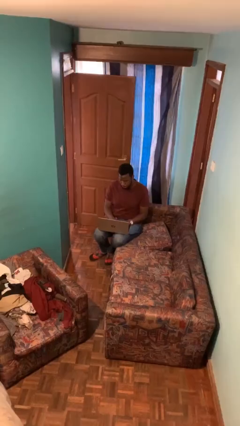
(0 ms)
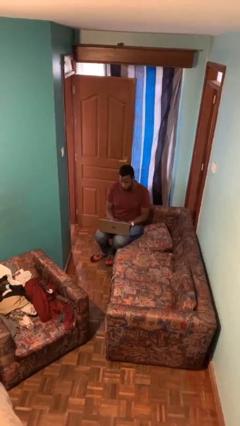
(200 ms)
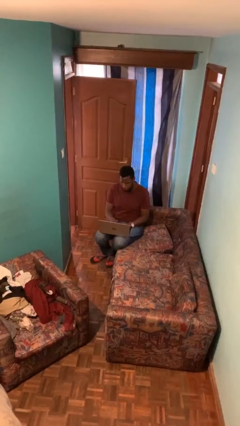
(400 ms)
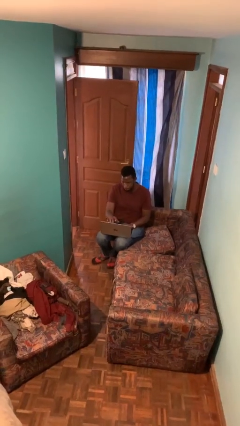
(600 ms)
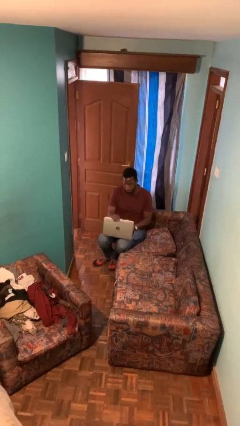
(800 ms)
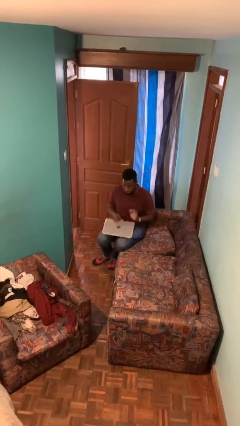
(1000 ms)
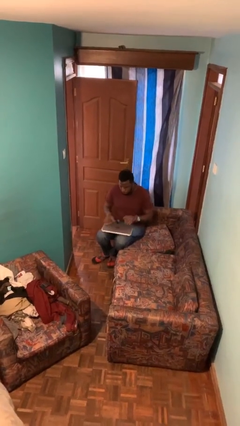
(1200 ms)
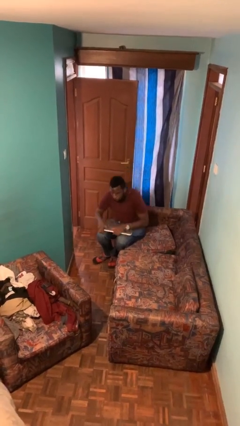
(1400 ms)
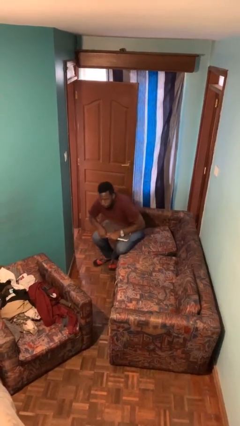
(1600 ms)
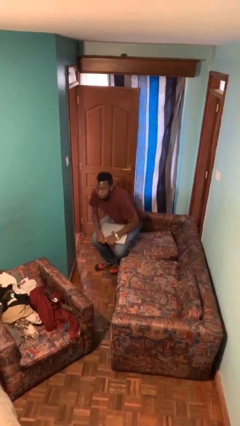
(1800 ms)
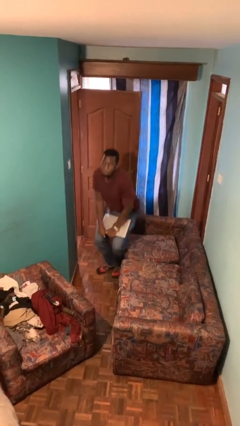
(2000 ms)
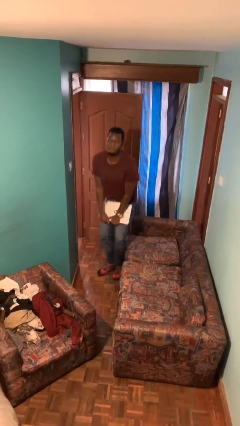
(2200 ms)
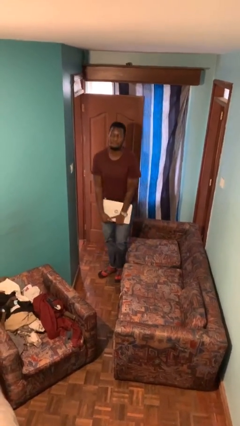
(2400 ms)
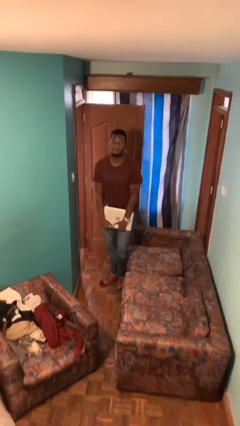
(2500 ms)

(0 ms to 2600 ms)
person stands up

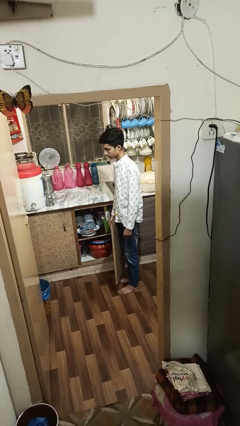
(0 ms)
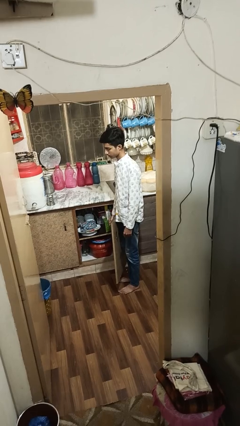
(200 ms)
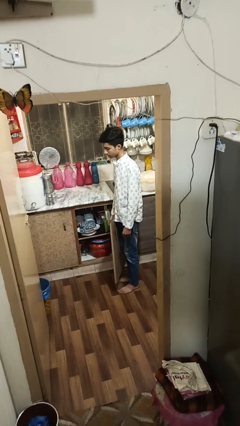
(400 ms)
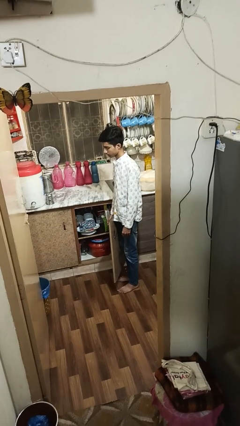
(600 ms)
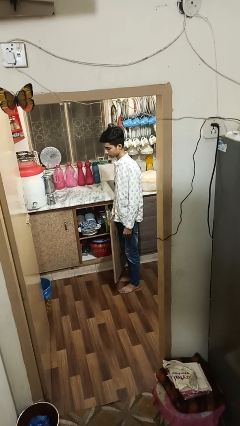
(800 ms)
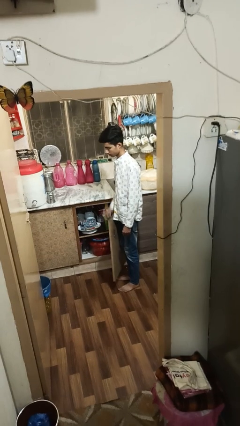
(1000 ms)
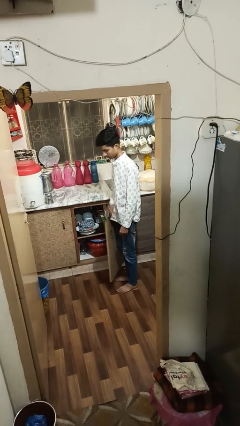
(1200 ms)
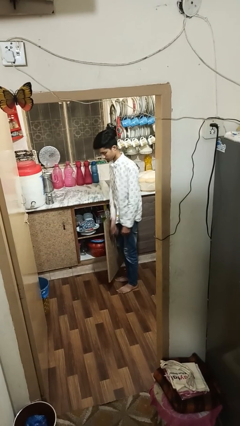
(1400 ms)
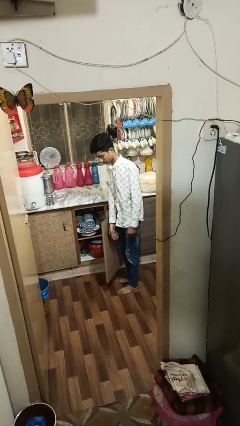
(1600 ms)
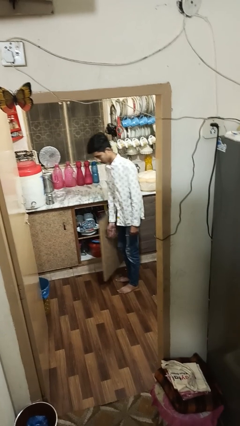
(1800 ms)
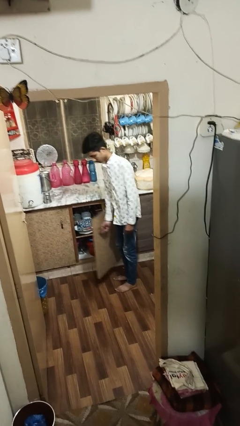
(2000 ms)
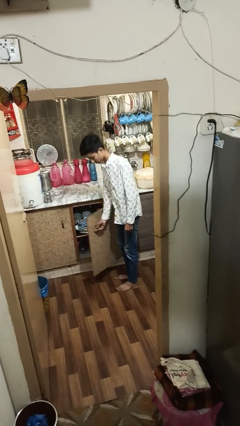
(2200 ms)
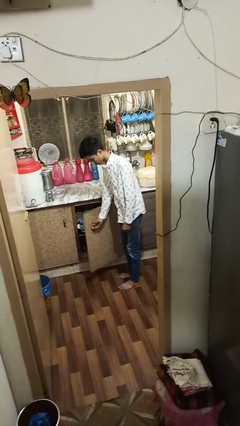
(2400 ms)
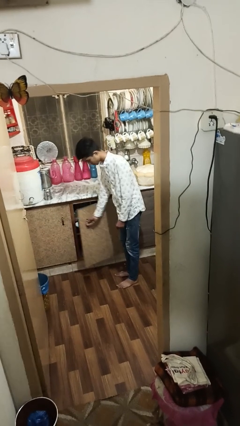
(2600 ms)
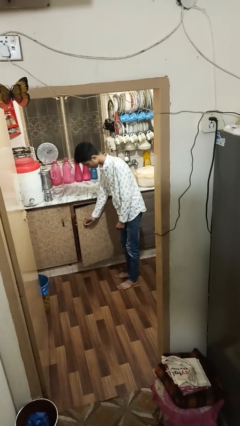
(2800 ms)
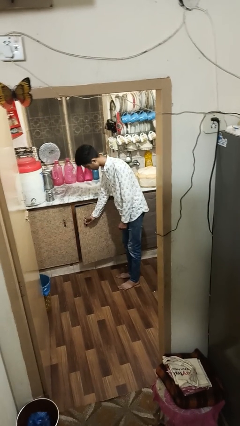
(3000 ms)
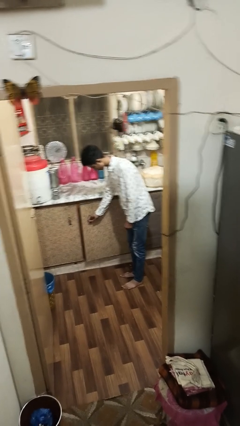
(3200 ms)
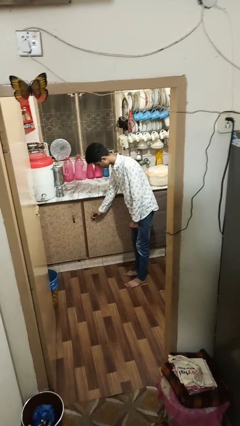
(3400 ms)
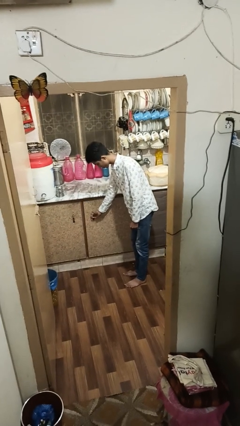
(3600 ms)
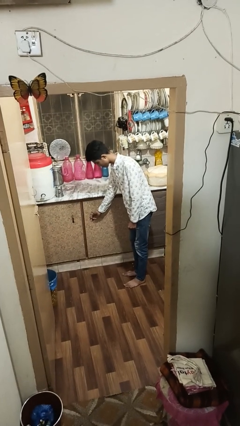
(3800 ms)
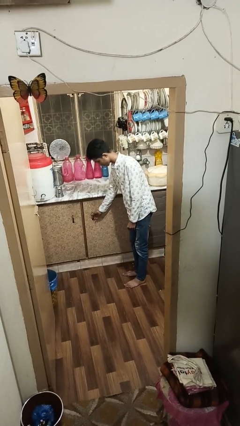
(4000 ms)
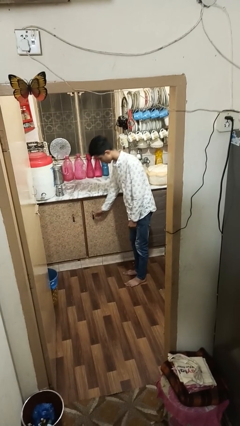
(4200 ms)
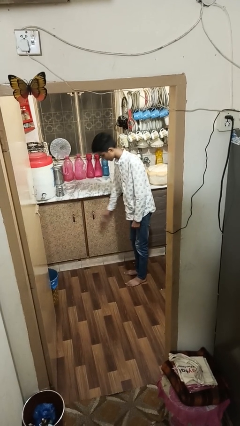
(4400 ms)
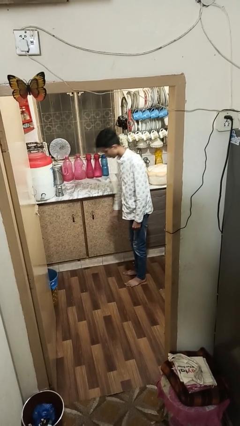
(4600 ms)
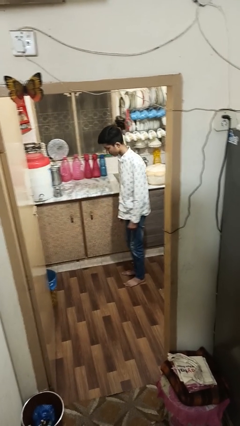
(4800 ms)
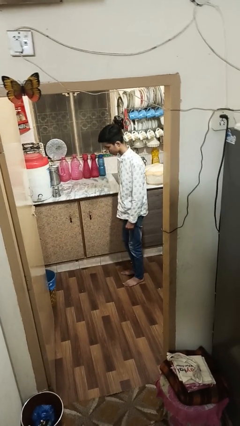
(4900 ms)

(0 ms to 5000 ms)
person closes cabinet

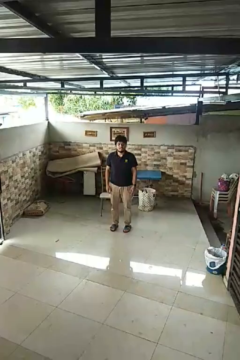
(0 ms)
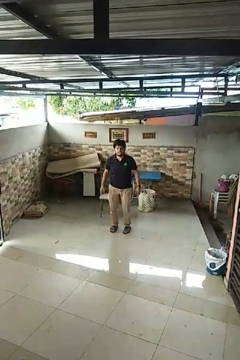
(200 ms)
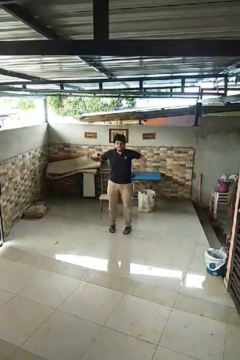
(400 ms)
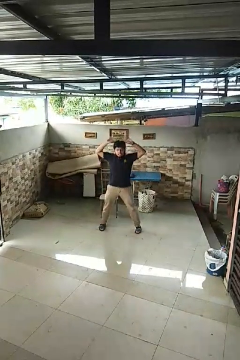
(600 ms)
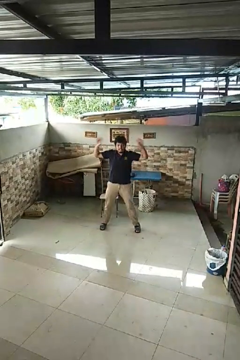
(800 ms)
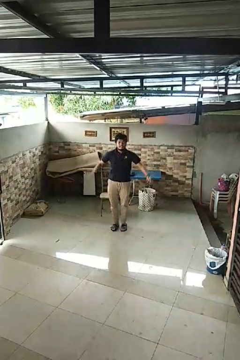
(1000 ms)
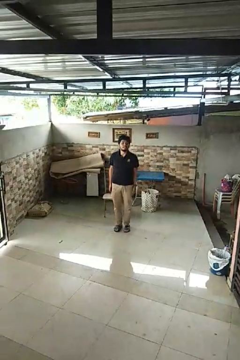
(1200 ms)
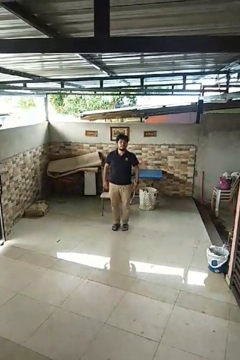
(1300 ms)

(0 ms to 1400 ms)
person exercises with jumping jacks

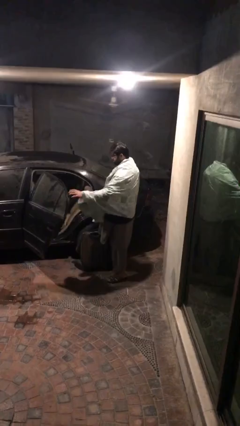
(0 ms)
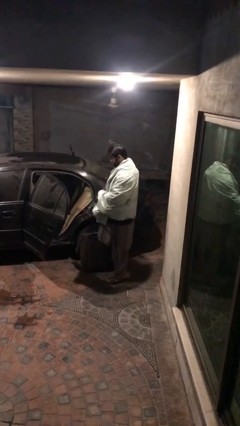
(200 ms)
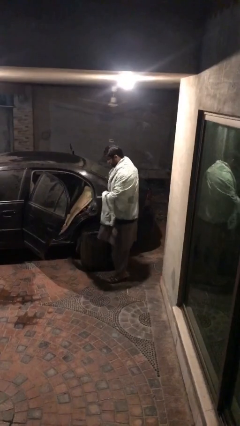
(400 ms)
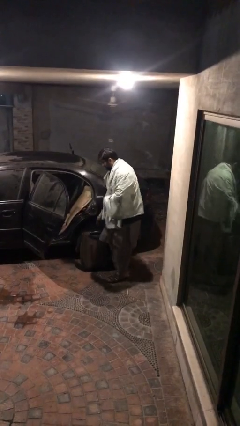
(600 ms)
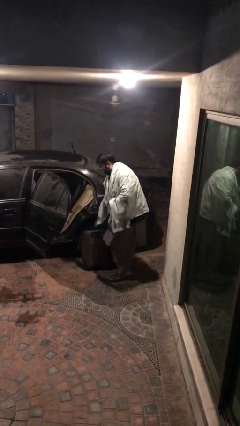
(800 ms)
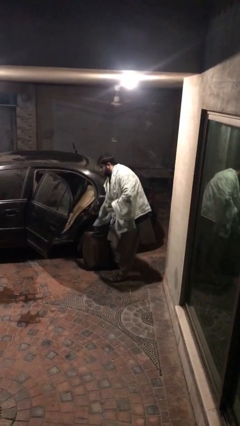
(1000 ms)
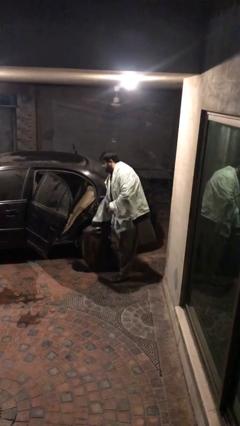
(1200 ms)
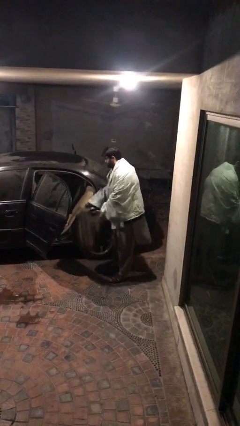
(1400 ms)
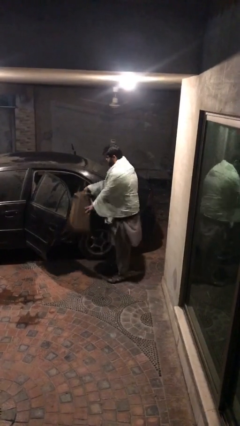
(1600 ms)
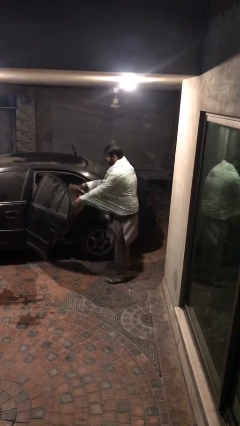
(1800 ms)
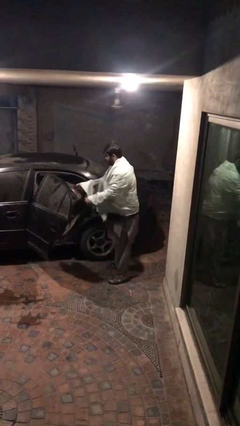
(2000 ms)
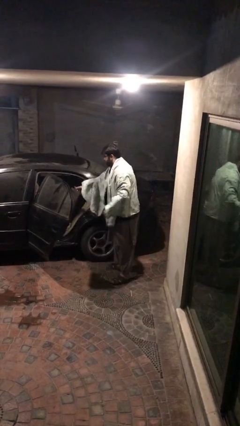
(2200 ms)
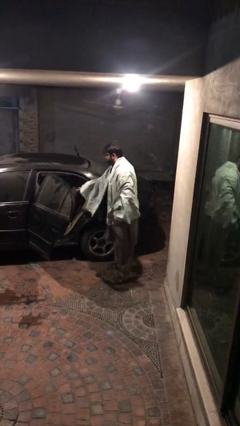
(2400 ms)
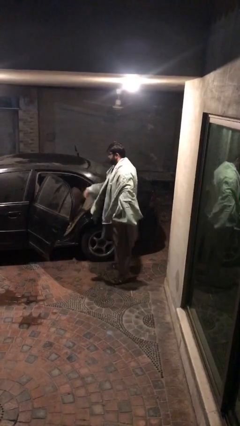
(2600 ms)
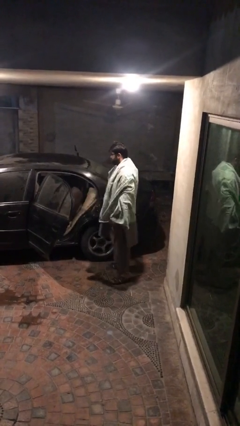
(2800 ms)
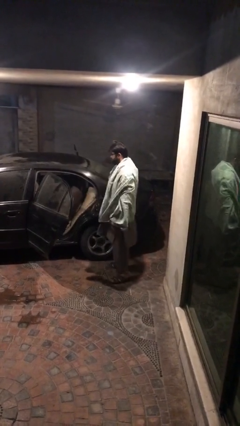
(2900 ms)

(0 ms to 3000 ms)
person loads car

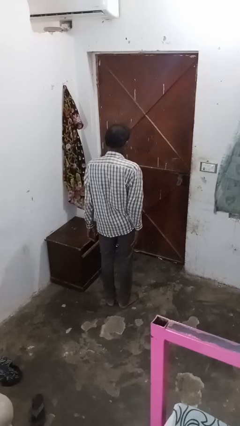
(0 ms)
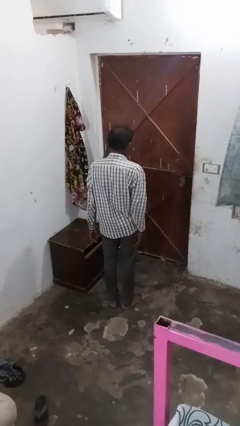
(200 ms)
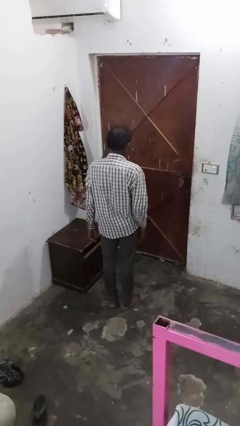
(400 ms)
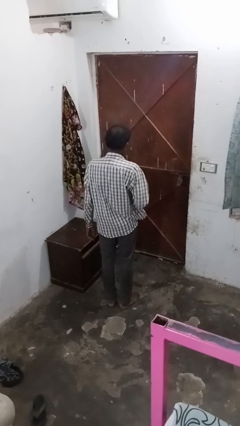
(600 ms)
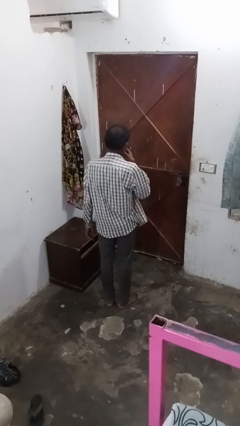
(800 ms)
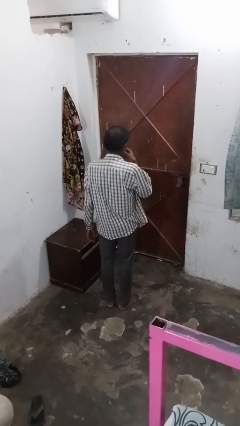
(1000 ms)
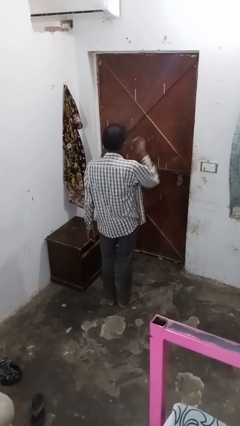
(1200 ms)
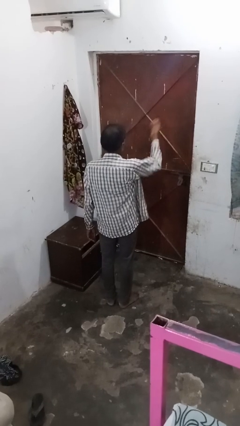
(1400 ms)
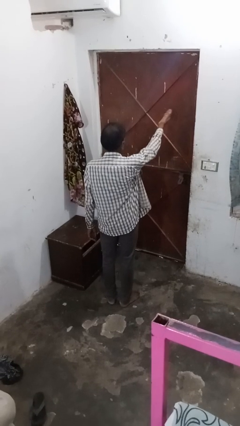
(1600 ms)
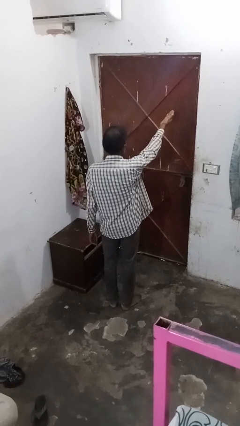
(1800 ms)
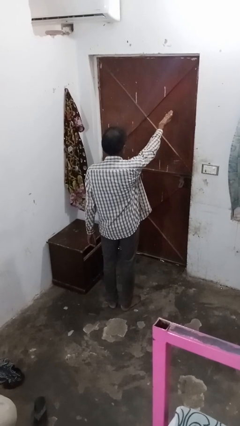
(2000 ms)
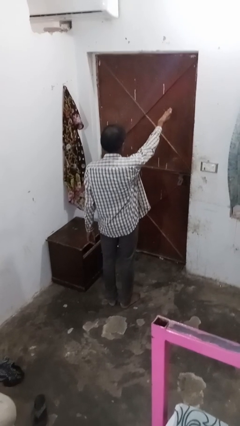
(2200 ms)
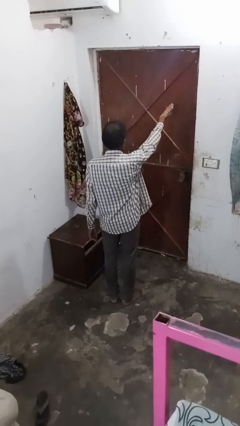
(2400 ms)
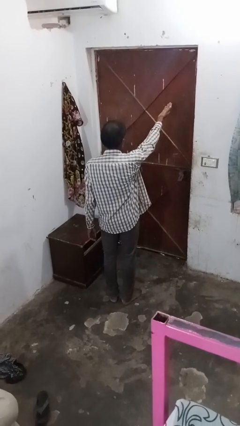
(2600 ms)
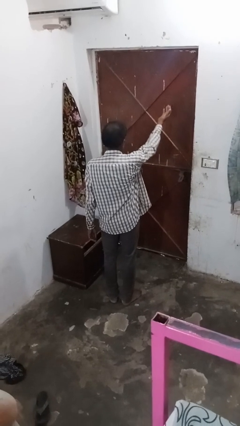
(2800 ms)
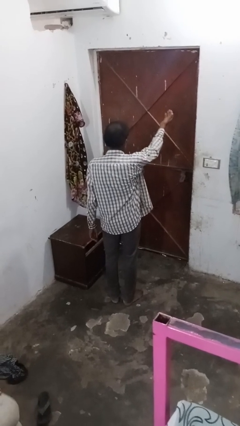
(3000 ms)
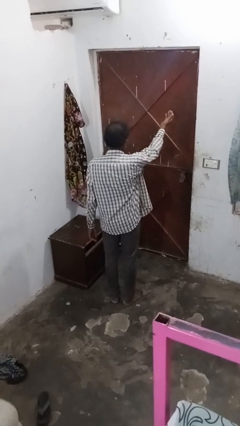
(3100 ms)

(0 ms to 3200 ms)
person gestures blow kiss

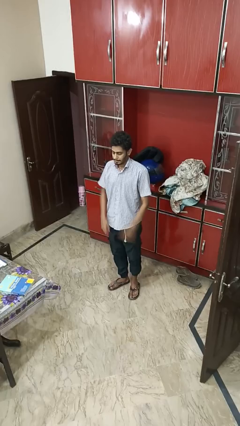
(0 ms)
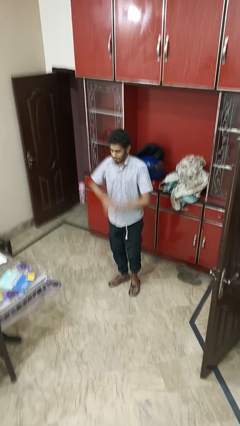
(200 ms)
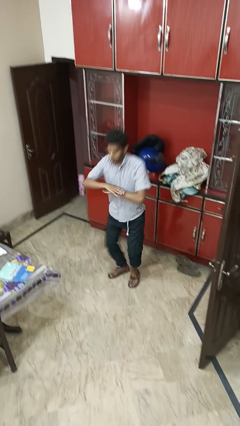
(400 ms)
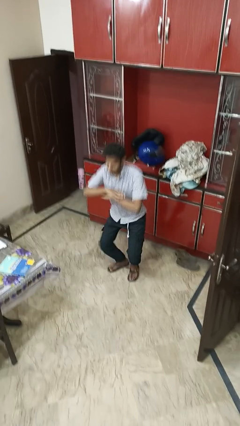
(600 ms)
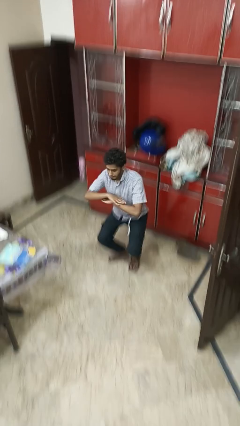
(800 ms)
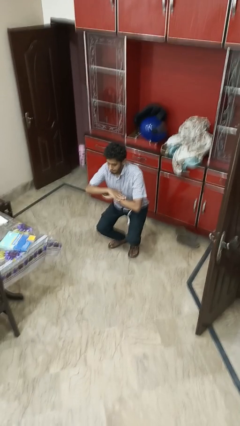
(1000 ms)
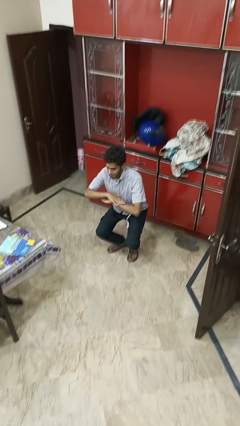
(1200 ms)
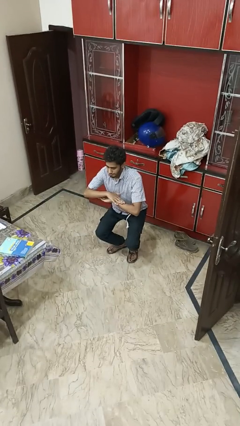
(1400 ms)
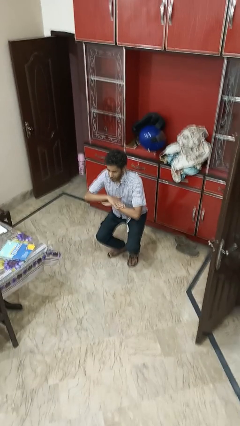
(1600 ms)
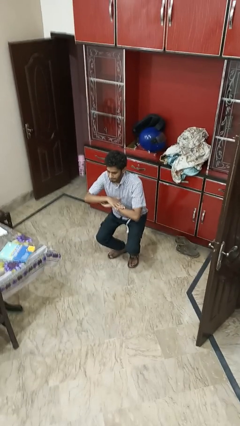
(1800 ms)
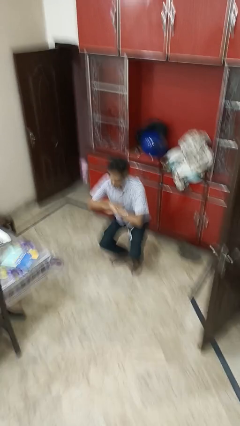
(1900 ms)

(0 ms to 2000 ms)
person squats

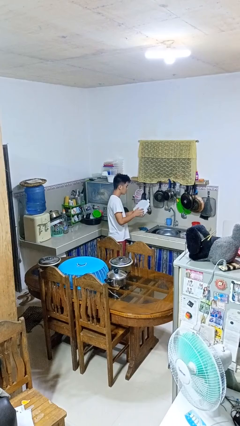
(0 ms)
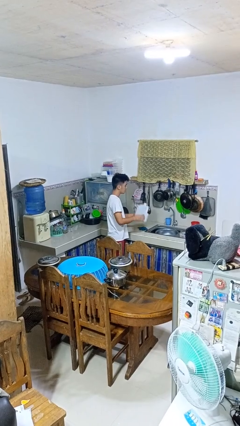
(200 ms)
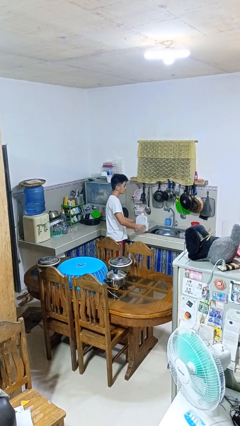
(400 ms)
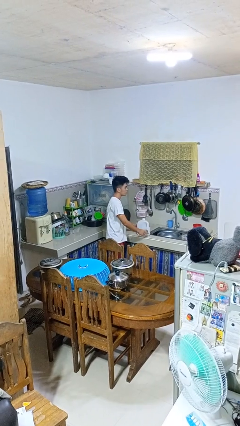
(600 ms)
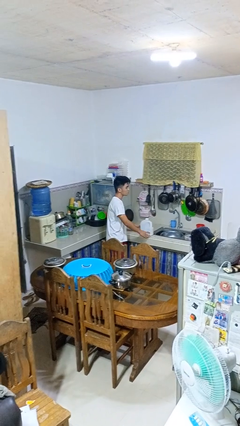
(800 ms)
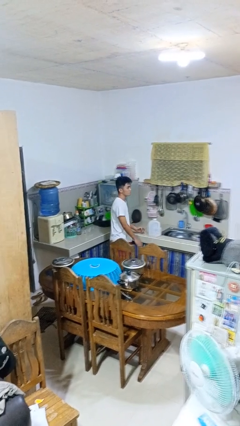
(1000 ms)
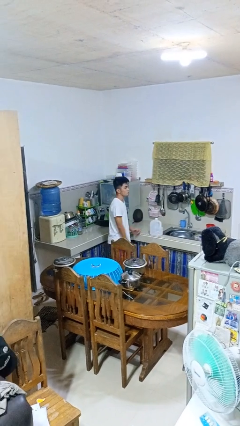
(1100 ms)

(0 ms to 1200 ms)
person puts down object on countertop
